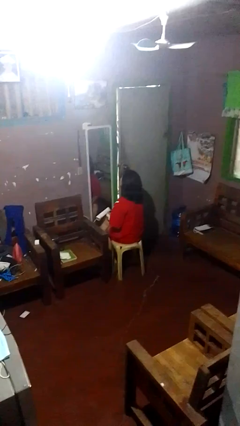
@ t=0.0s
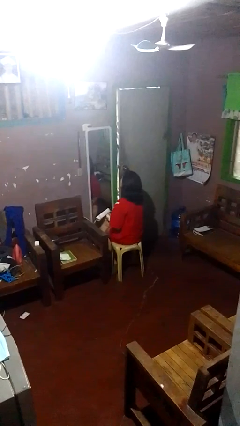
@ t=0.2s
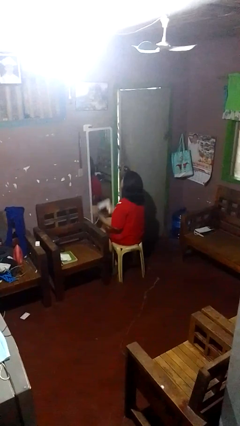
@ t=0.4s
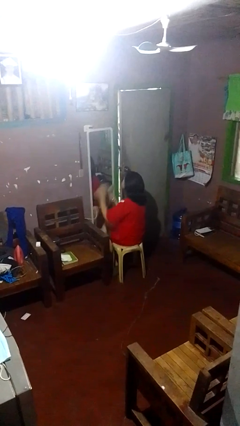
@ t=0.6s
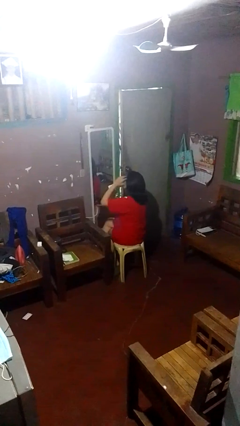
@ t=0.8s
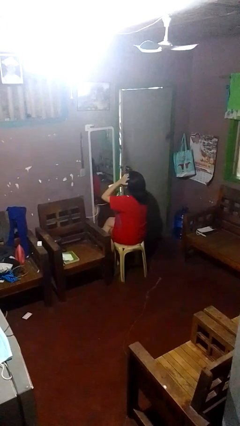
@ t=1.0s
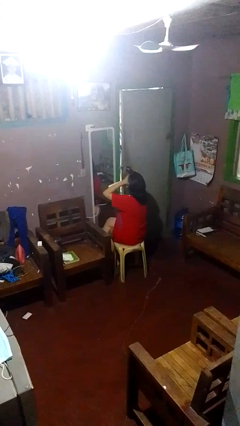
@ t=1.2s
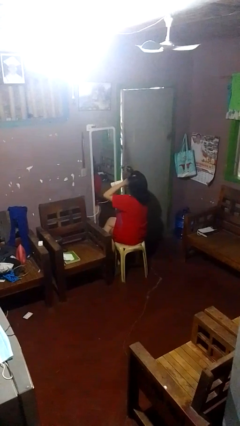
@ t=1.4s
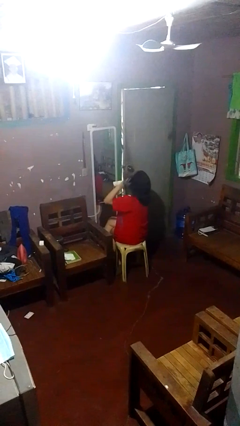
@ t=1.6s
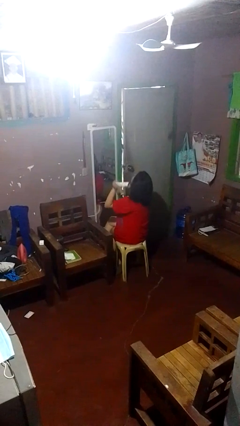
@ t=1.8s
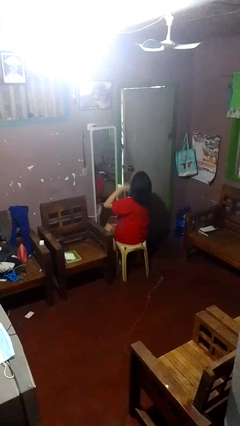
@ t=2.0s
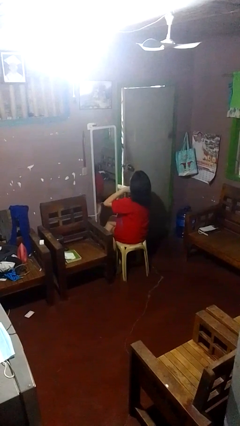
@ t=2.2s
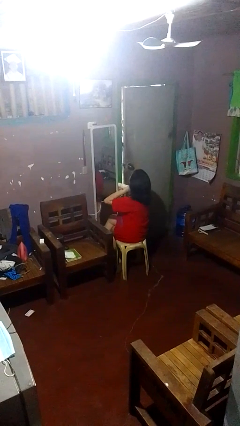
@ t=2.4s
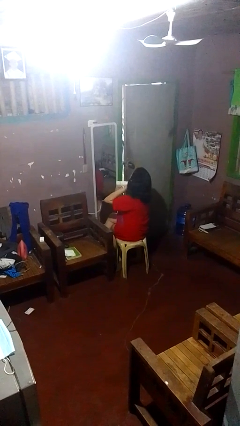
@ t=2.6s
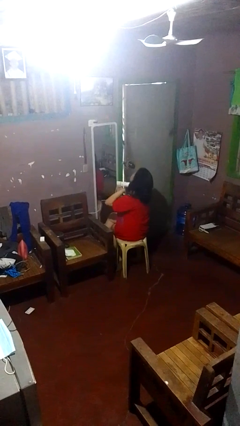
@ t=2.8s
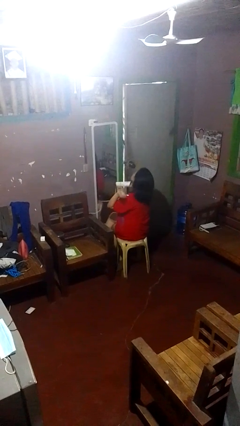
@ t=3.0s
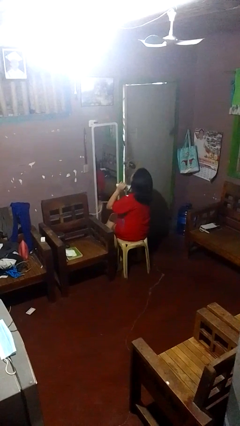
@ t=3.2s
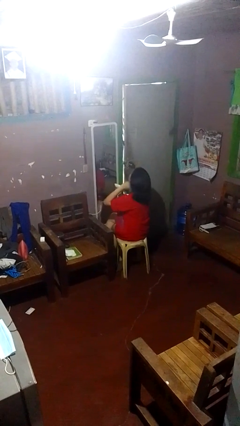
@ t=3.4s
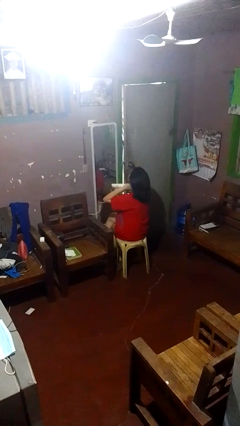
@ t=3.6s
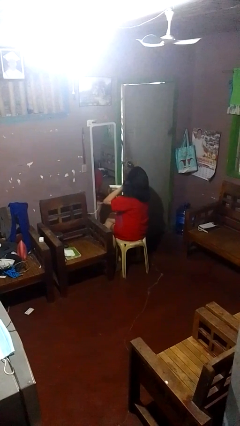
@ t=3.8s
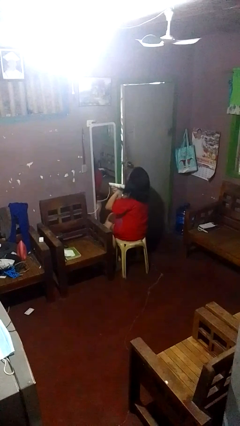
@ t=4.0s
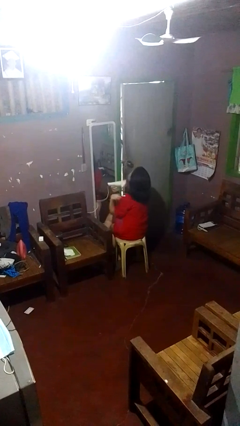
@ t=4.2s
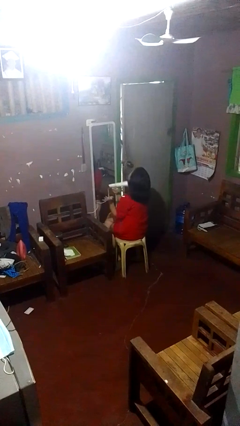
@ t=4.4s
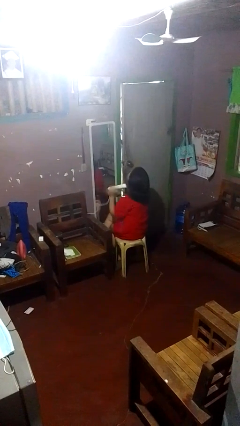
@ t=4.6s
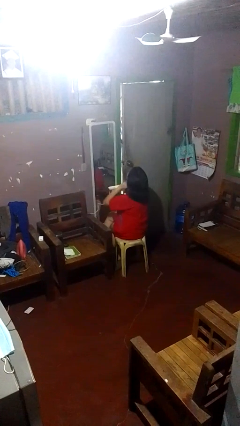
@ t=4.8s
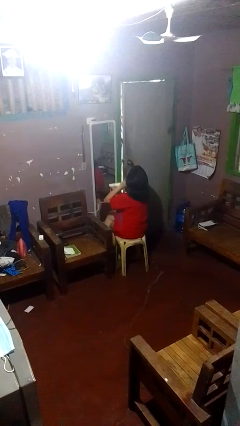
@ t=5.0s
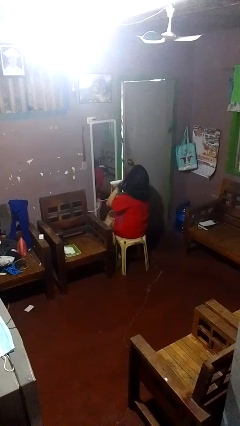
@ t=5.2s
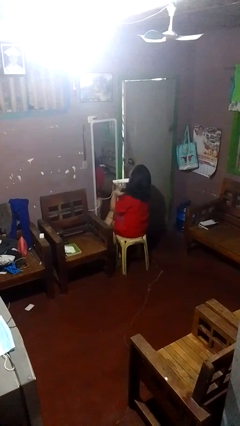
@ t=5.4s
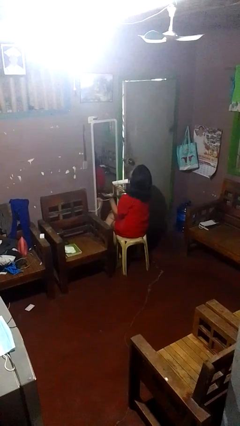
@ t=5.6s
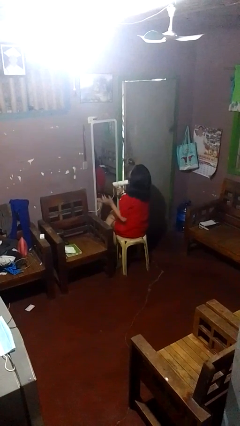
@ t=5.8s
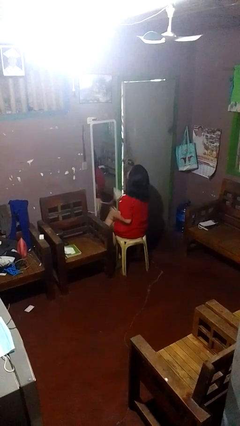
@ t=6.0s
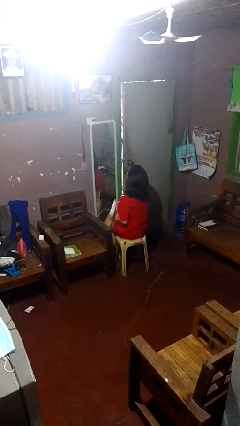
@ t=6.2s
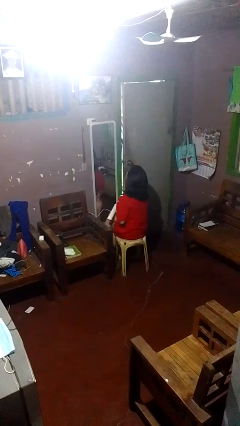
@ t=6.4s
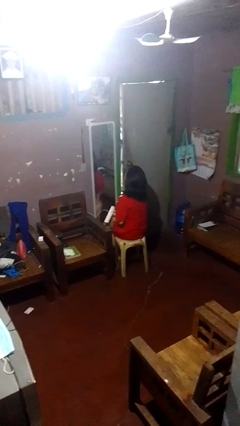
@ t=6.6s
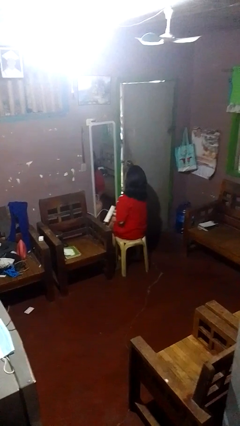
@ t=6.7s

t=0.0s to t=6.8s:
person dries hair with hairdryer

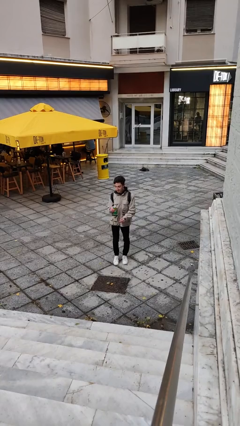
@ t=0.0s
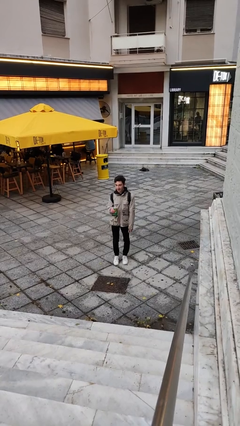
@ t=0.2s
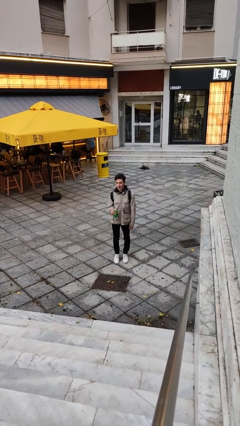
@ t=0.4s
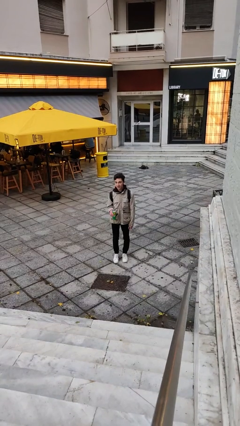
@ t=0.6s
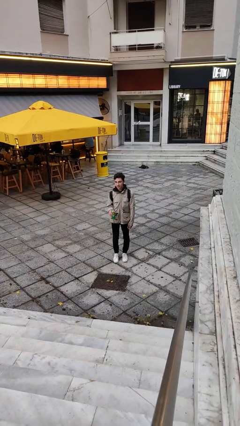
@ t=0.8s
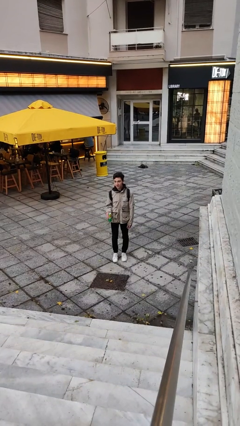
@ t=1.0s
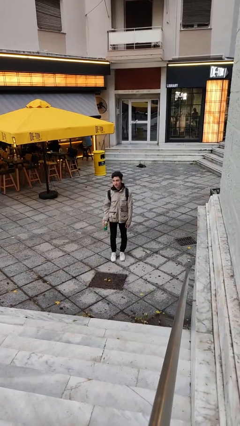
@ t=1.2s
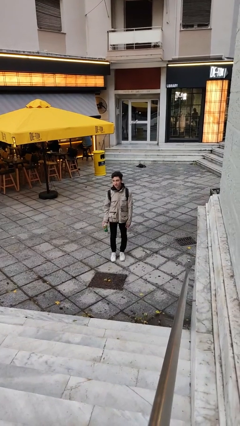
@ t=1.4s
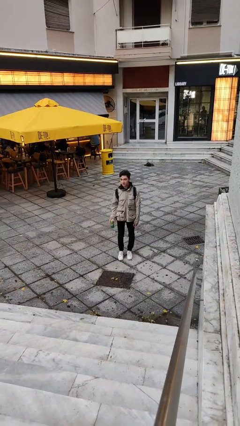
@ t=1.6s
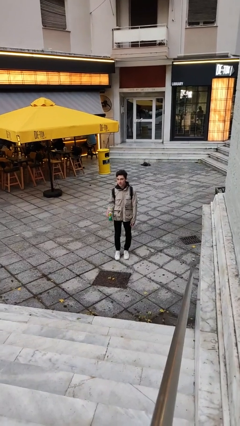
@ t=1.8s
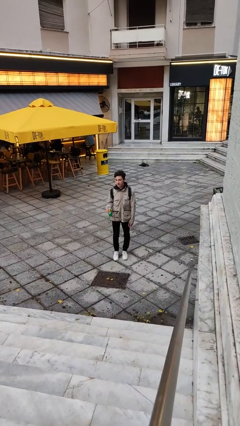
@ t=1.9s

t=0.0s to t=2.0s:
person opens beverage can

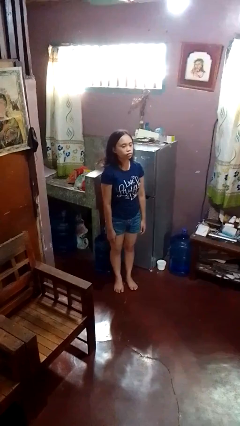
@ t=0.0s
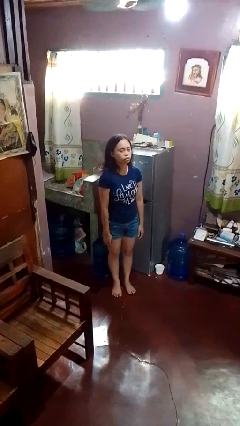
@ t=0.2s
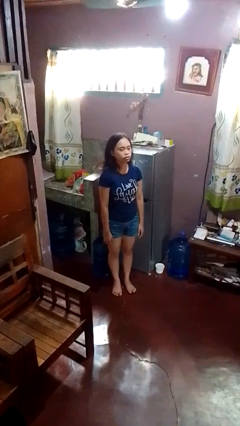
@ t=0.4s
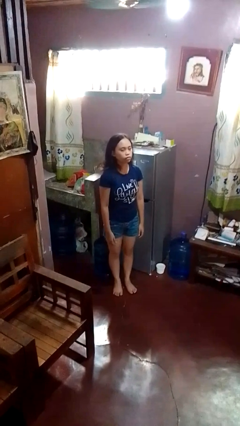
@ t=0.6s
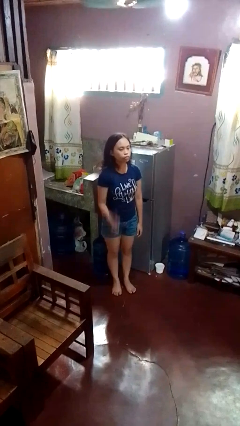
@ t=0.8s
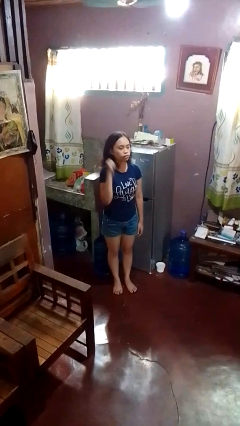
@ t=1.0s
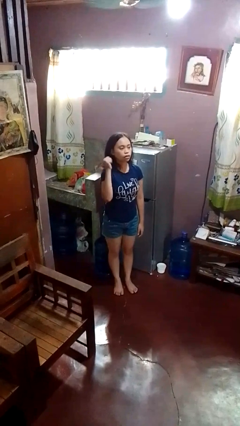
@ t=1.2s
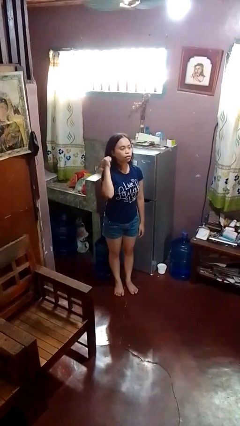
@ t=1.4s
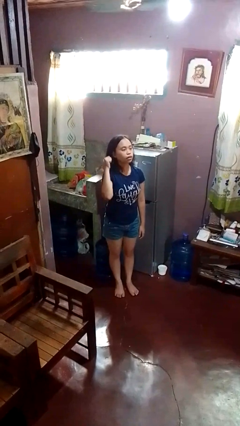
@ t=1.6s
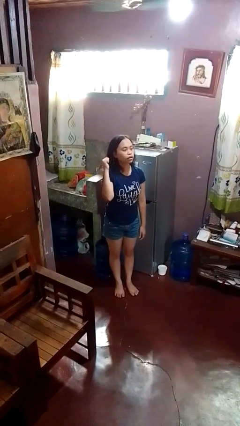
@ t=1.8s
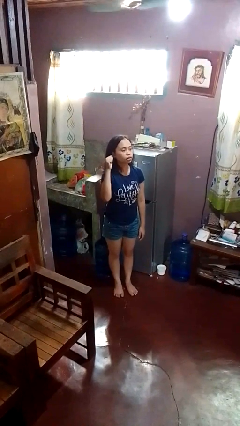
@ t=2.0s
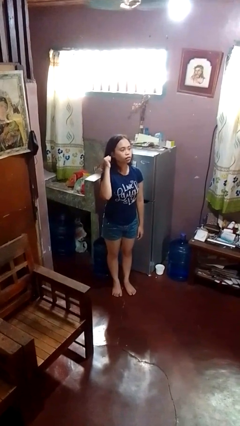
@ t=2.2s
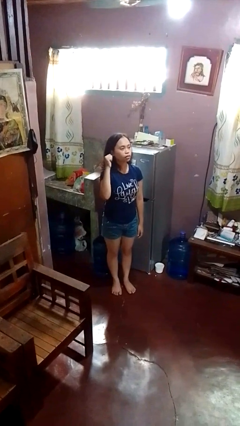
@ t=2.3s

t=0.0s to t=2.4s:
person gestures behind me

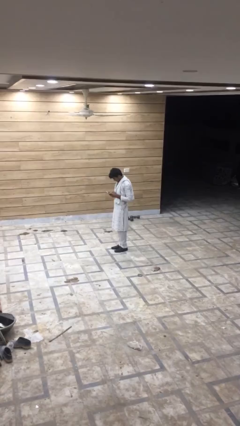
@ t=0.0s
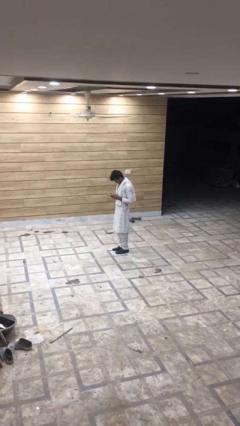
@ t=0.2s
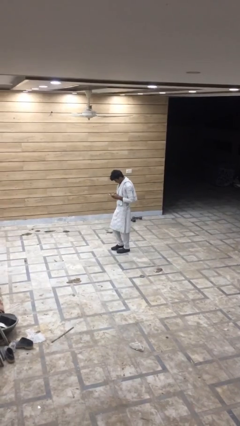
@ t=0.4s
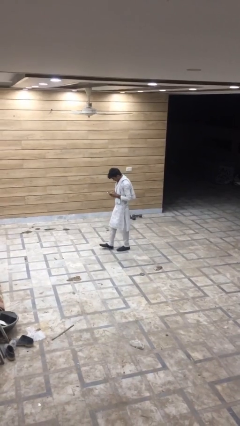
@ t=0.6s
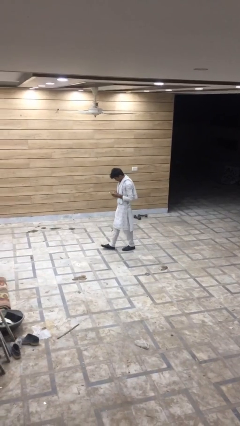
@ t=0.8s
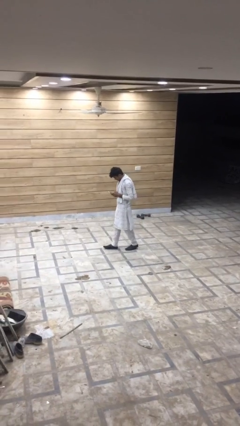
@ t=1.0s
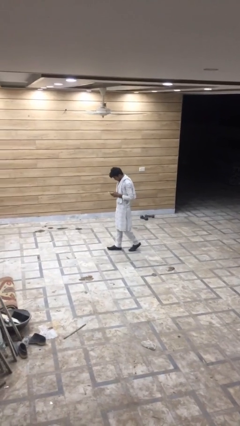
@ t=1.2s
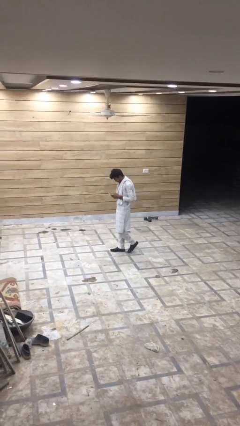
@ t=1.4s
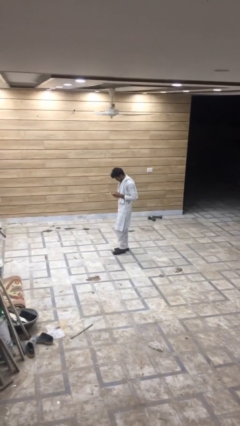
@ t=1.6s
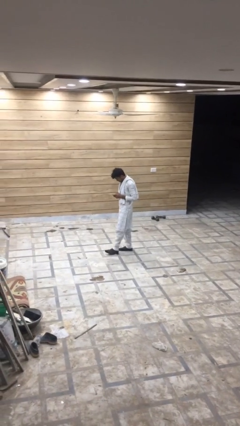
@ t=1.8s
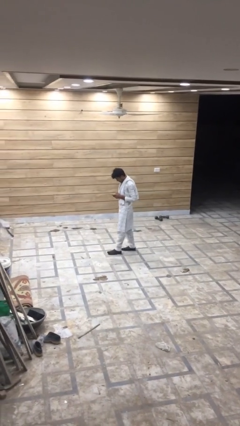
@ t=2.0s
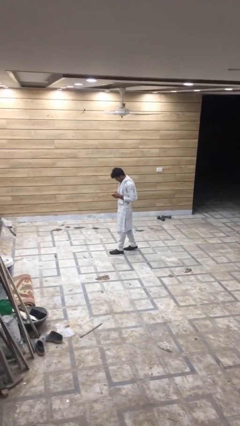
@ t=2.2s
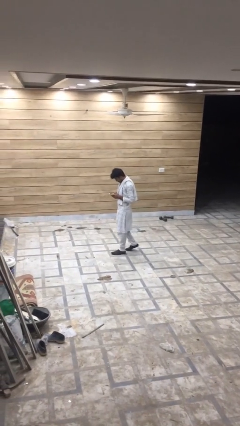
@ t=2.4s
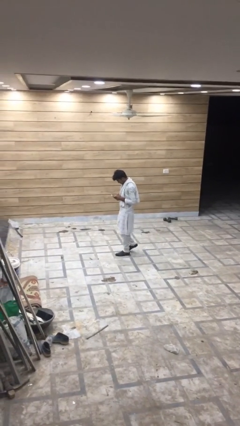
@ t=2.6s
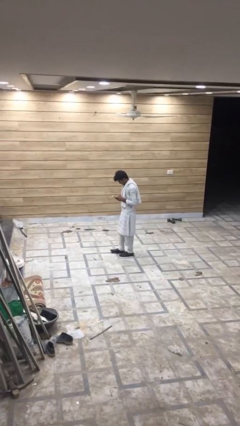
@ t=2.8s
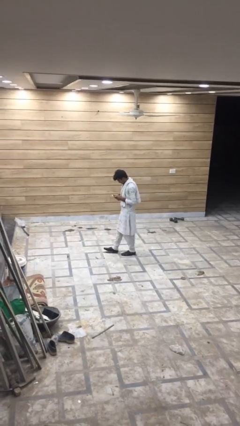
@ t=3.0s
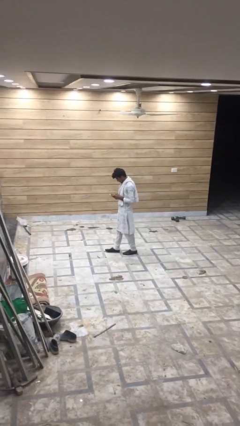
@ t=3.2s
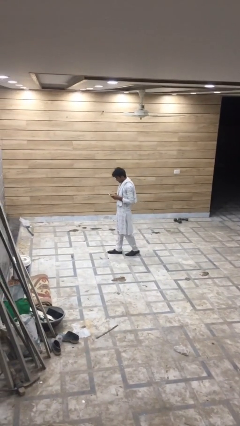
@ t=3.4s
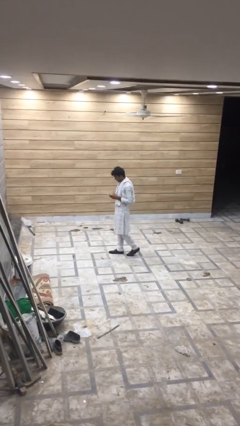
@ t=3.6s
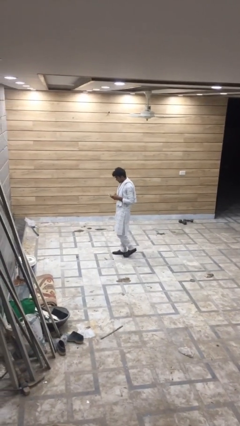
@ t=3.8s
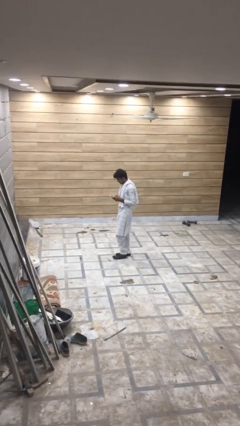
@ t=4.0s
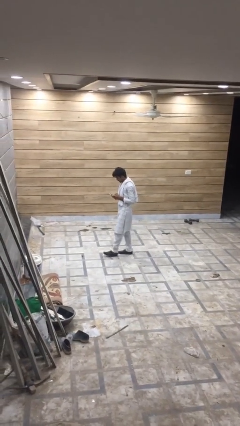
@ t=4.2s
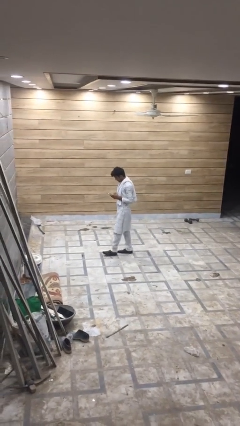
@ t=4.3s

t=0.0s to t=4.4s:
person texts on phone

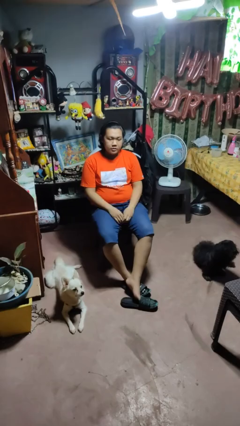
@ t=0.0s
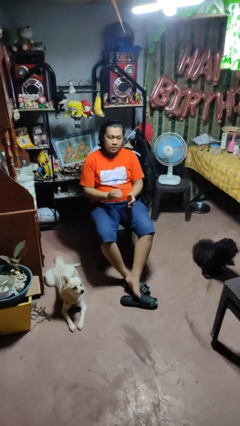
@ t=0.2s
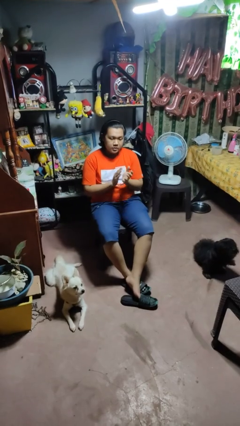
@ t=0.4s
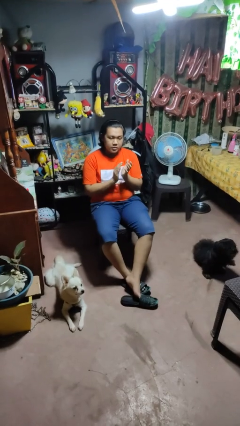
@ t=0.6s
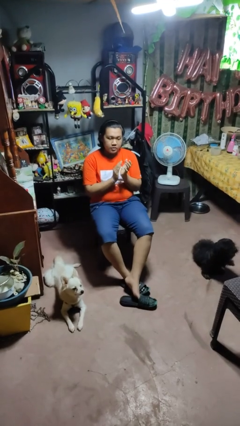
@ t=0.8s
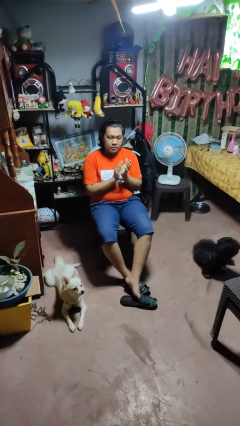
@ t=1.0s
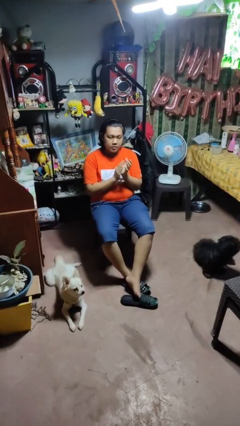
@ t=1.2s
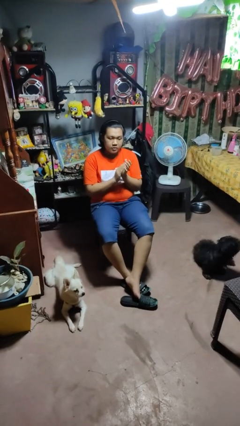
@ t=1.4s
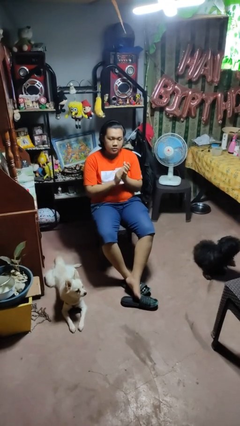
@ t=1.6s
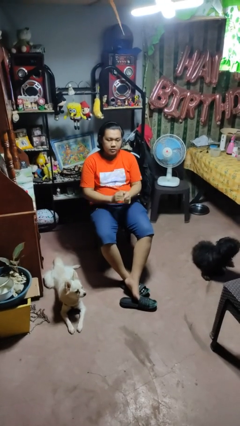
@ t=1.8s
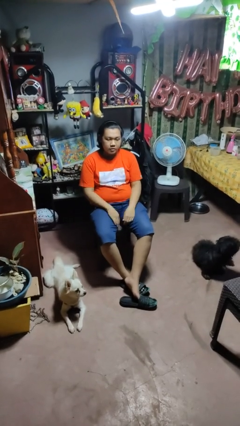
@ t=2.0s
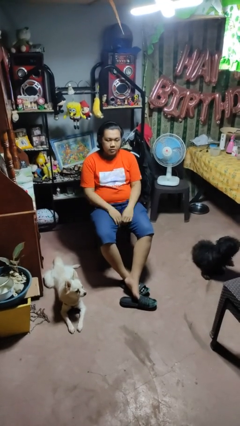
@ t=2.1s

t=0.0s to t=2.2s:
person claps hands
